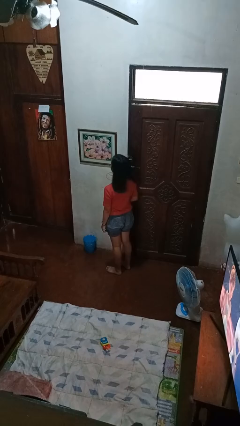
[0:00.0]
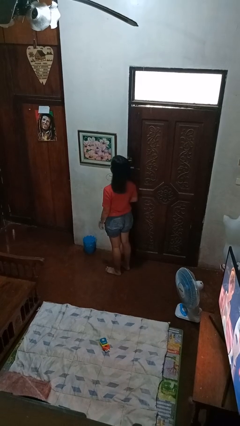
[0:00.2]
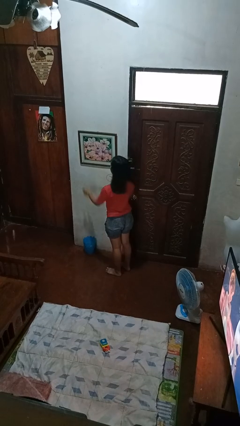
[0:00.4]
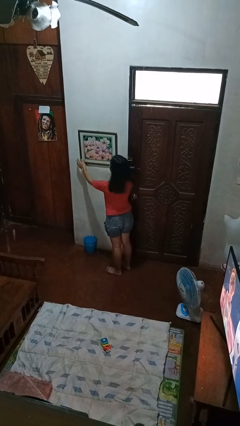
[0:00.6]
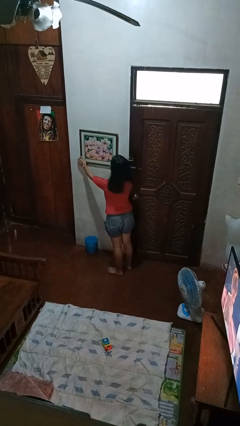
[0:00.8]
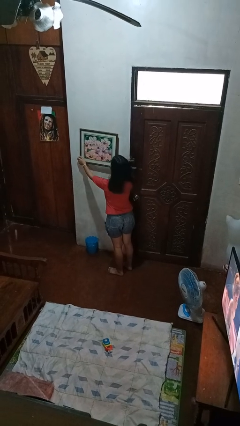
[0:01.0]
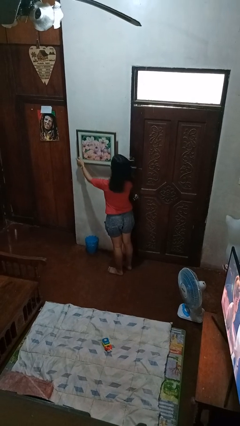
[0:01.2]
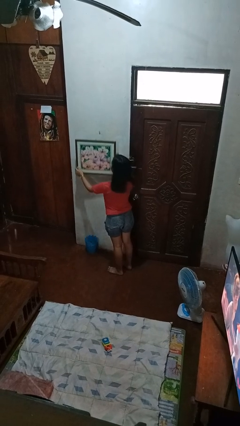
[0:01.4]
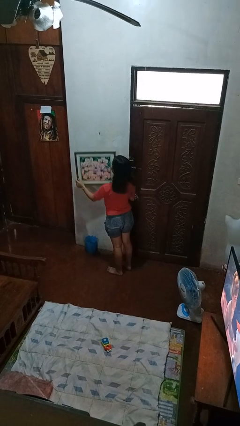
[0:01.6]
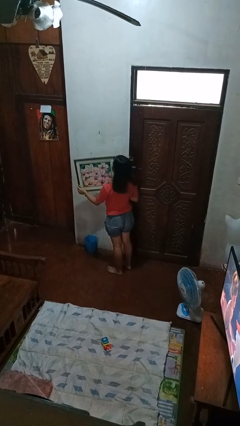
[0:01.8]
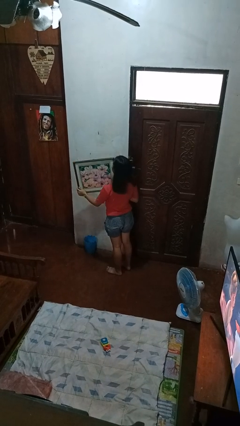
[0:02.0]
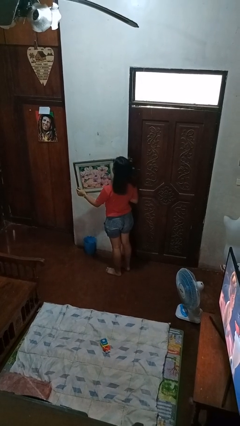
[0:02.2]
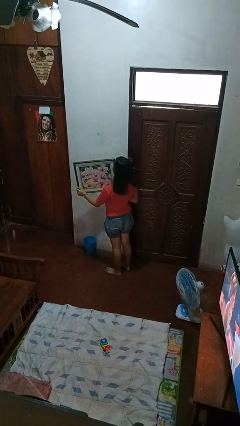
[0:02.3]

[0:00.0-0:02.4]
person takes down picture frame

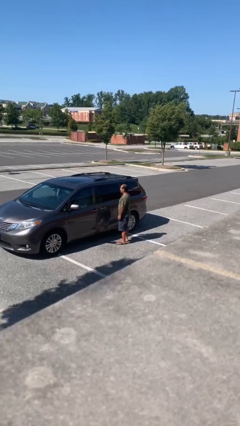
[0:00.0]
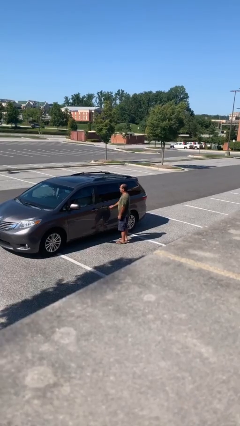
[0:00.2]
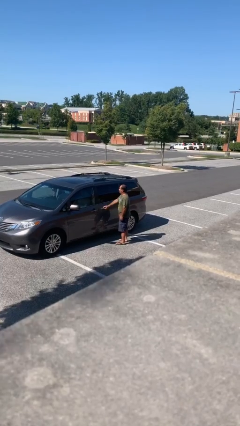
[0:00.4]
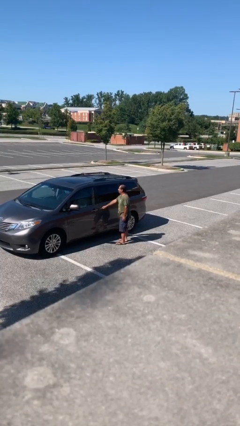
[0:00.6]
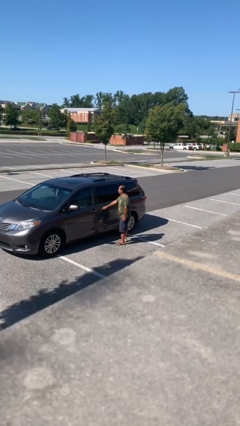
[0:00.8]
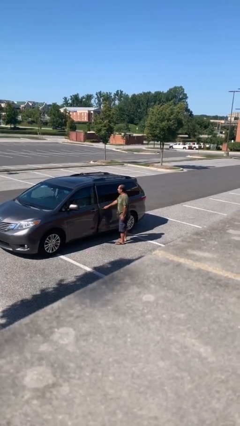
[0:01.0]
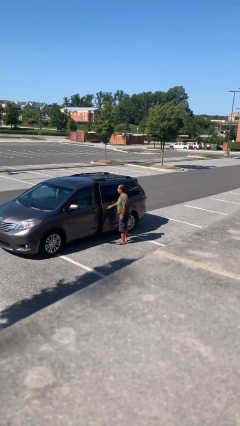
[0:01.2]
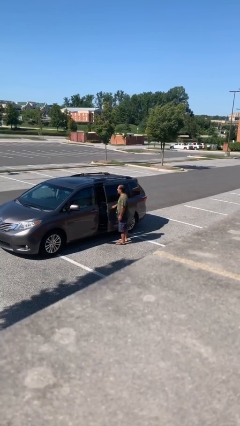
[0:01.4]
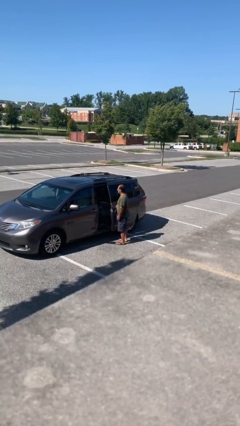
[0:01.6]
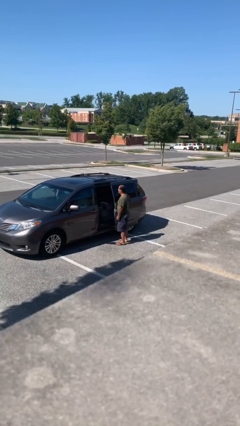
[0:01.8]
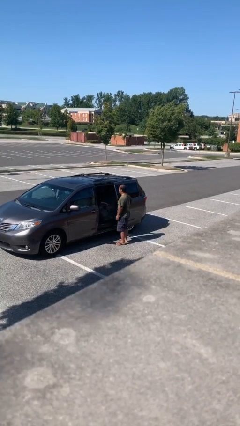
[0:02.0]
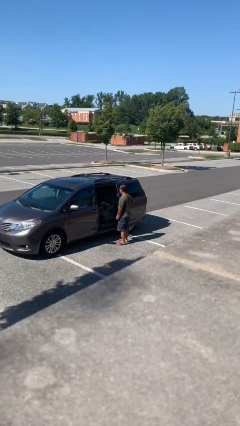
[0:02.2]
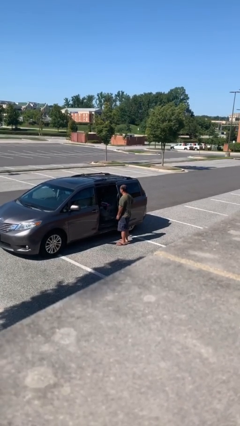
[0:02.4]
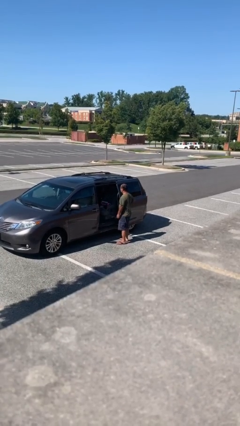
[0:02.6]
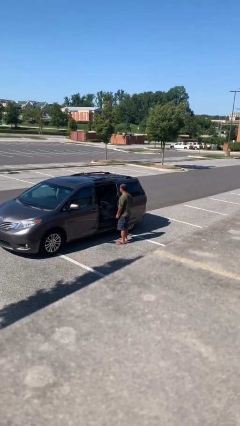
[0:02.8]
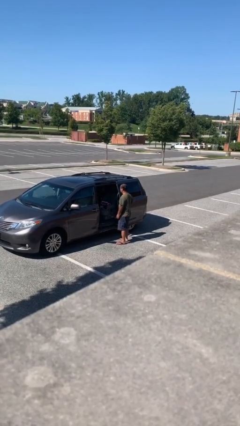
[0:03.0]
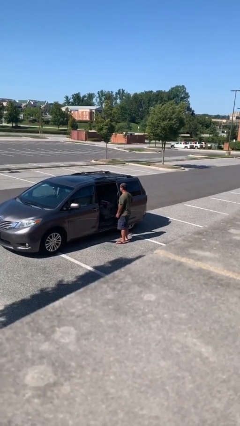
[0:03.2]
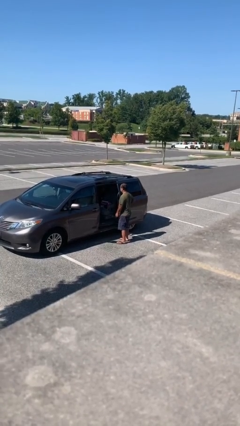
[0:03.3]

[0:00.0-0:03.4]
person opens car door

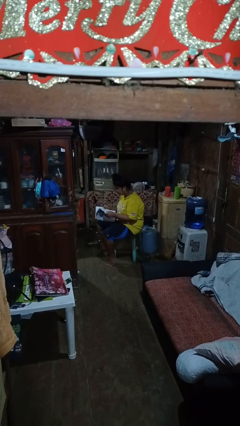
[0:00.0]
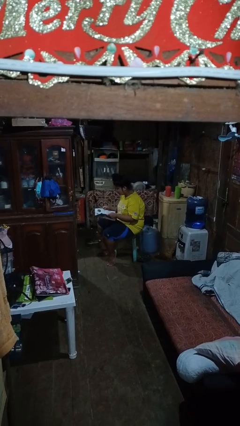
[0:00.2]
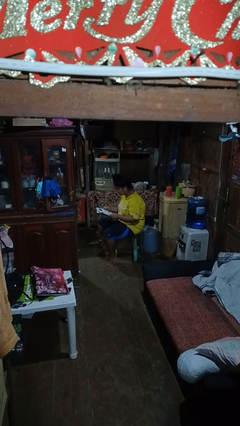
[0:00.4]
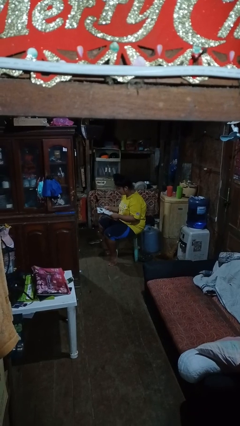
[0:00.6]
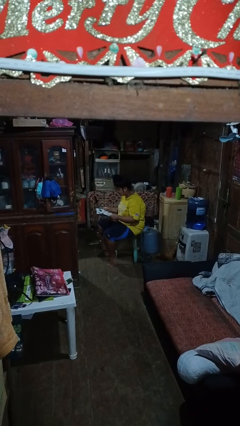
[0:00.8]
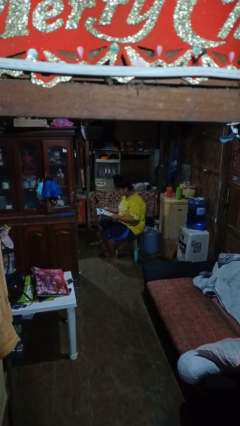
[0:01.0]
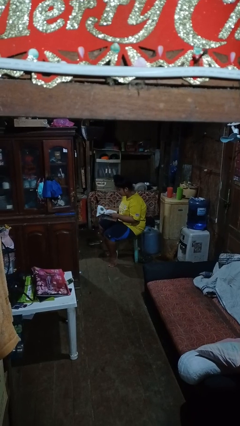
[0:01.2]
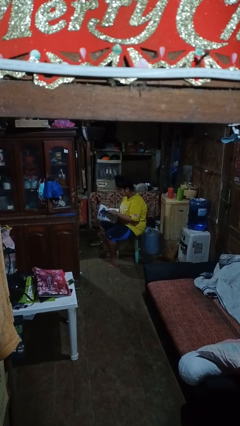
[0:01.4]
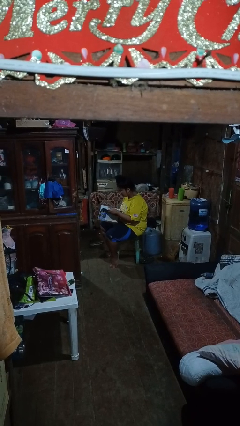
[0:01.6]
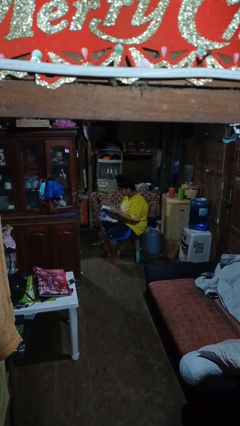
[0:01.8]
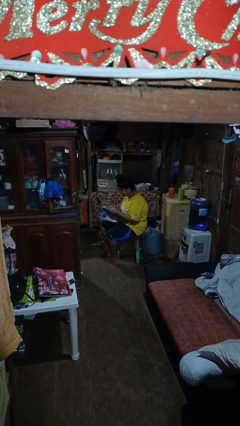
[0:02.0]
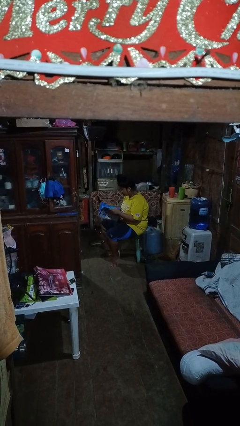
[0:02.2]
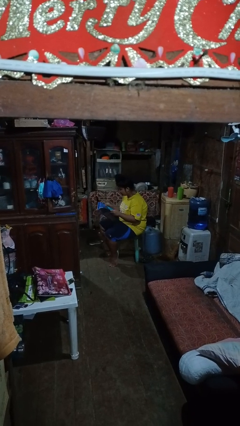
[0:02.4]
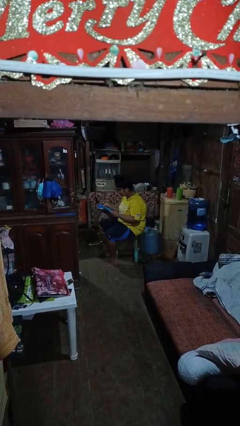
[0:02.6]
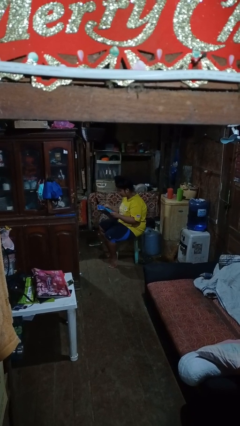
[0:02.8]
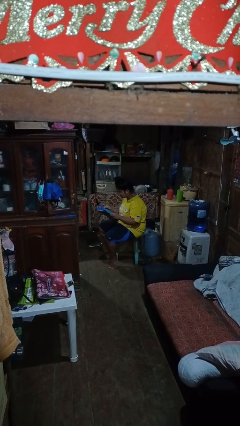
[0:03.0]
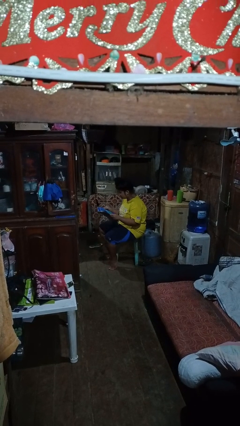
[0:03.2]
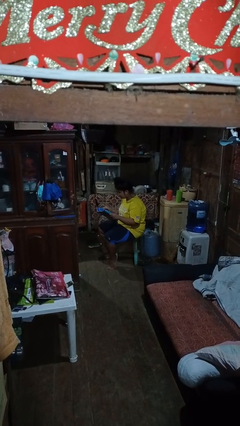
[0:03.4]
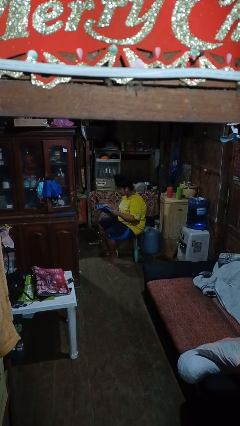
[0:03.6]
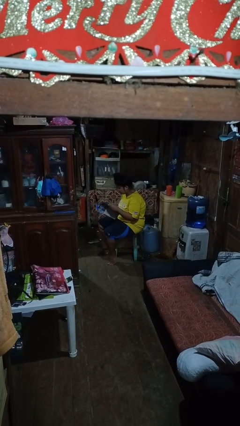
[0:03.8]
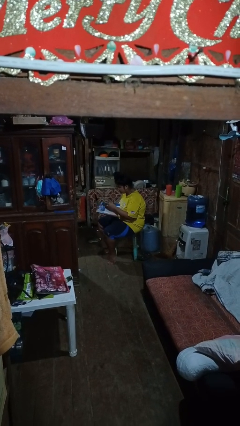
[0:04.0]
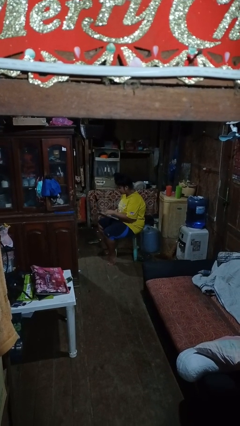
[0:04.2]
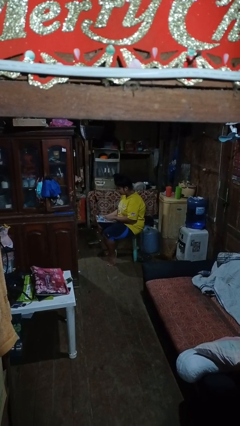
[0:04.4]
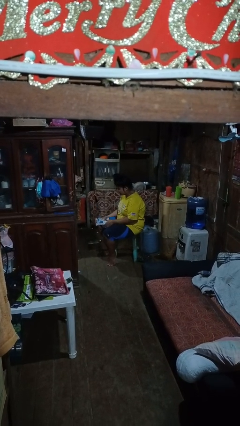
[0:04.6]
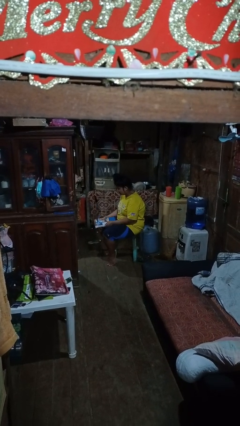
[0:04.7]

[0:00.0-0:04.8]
person reads magazine

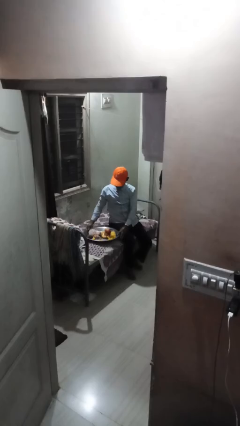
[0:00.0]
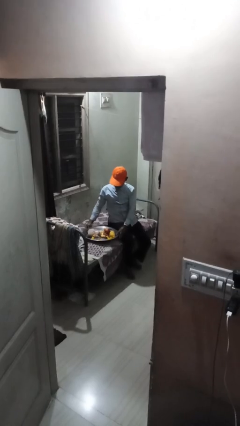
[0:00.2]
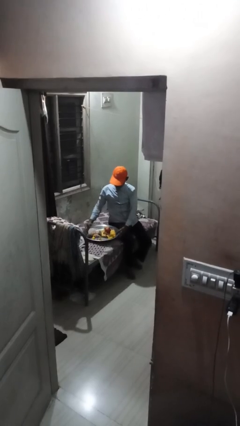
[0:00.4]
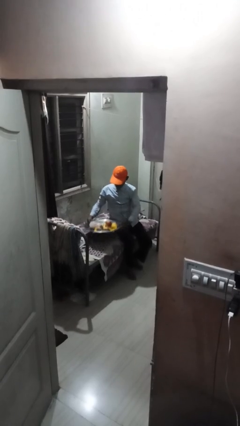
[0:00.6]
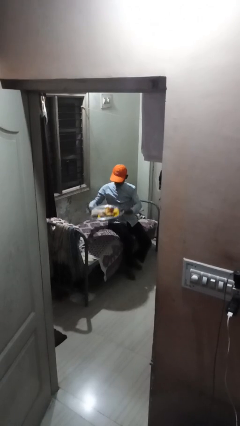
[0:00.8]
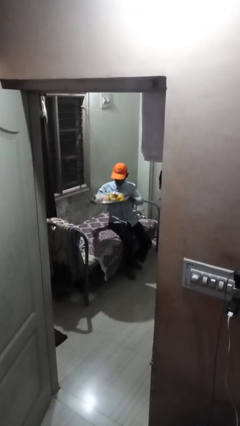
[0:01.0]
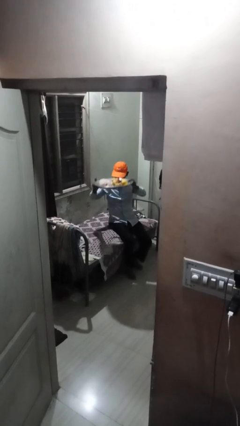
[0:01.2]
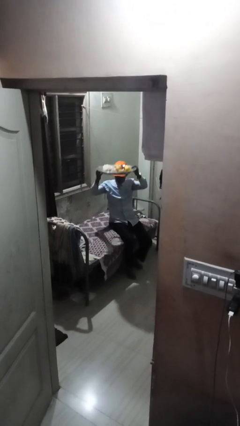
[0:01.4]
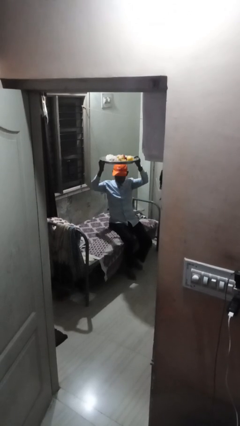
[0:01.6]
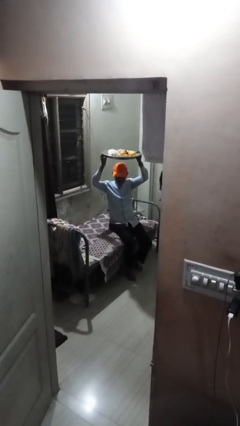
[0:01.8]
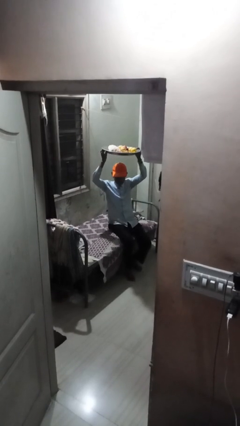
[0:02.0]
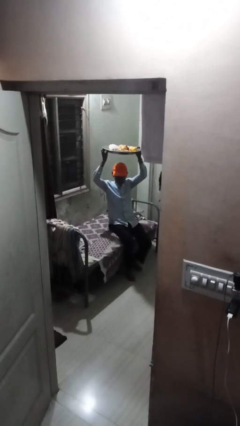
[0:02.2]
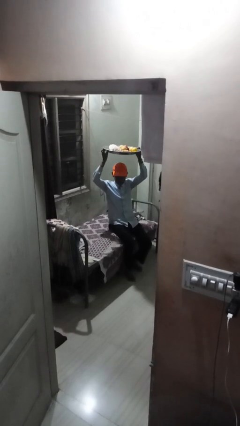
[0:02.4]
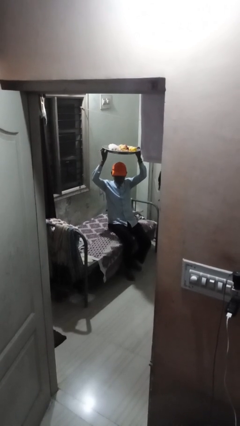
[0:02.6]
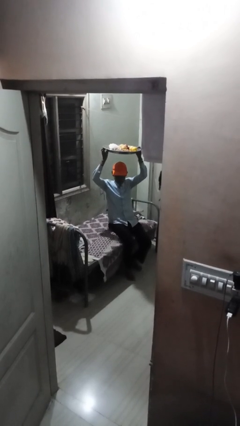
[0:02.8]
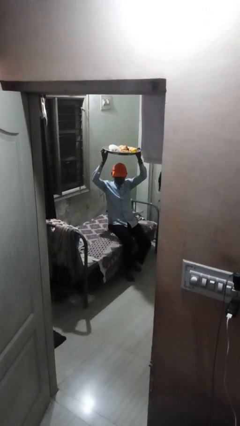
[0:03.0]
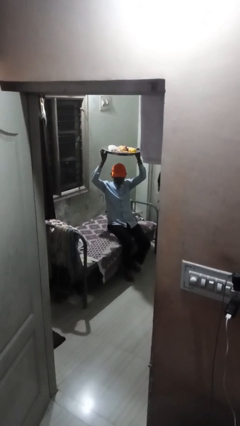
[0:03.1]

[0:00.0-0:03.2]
person holds object above head

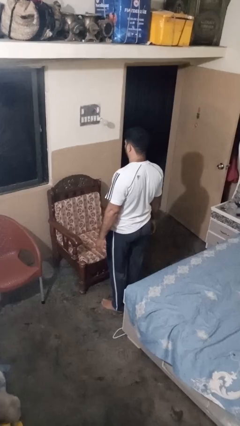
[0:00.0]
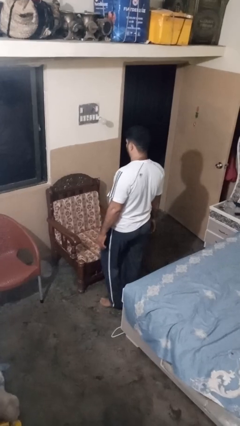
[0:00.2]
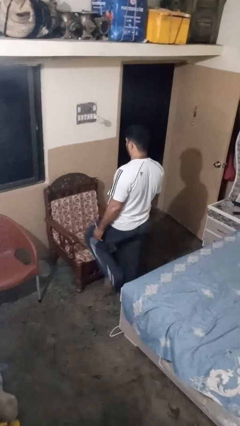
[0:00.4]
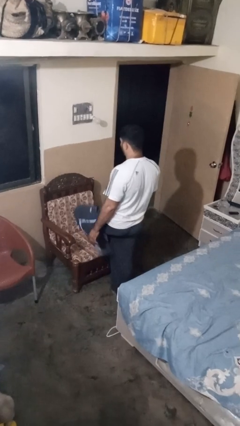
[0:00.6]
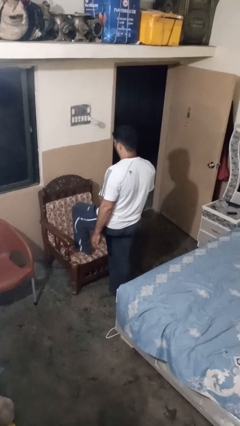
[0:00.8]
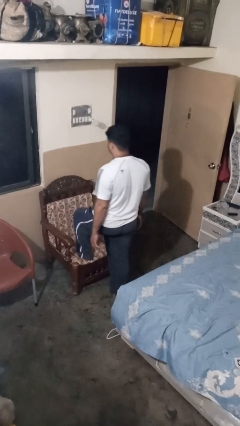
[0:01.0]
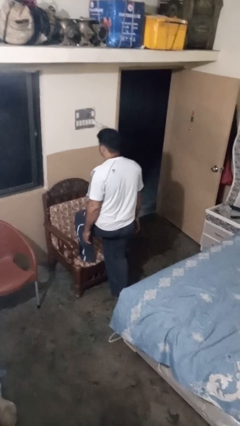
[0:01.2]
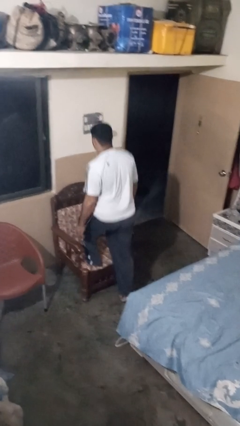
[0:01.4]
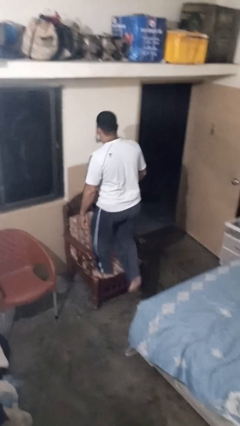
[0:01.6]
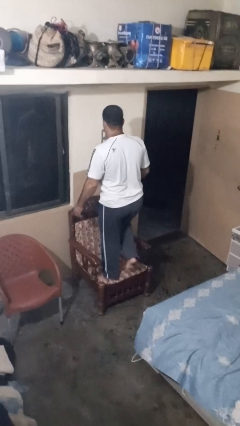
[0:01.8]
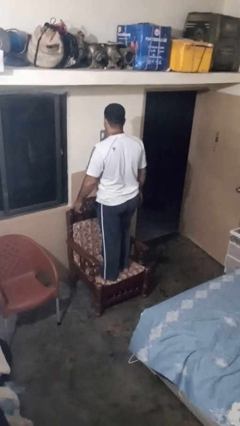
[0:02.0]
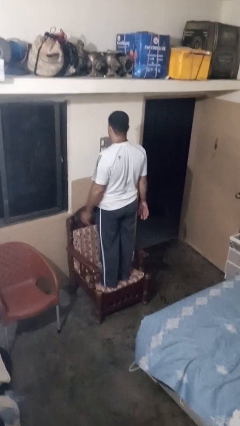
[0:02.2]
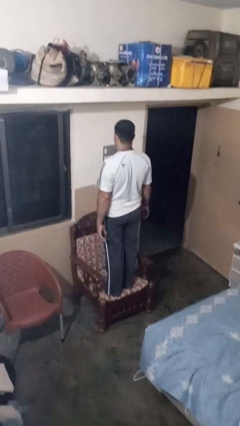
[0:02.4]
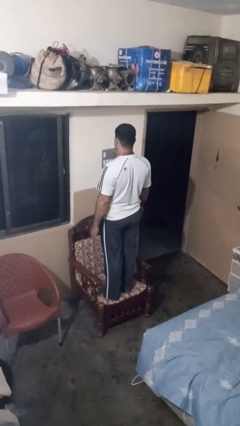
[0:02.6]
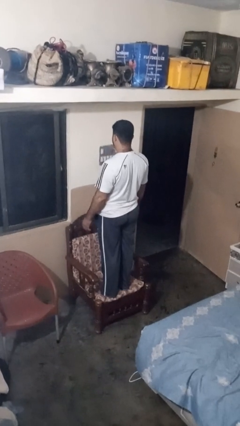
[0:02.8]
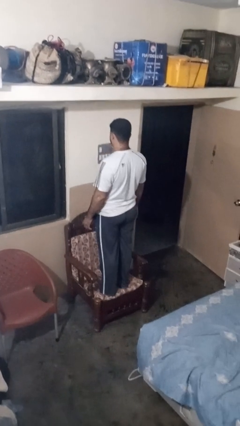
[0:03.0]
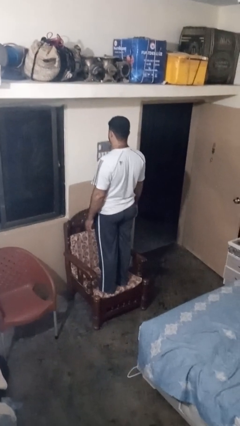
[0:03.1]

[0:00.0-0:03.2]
person climbs on couch

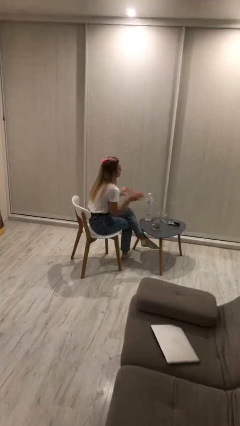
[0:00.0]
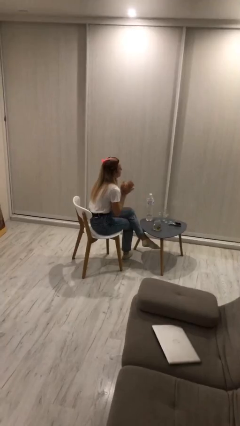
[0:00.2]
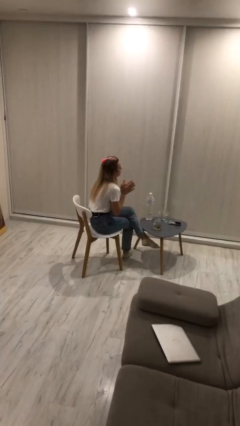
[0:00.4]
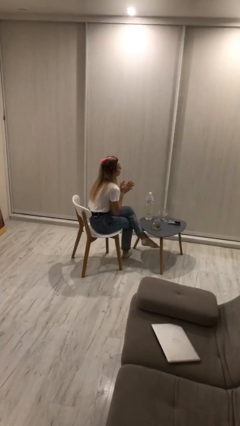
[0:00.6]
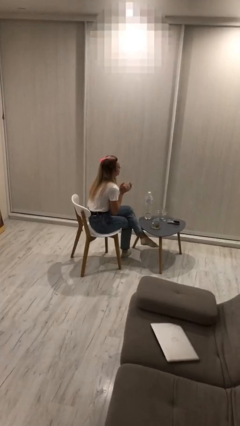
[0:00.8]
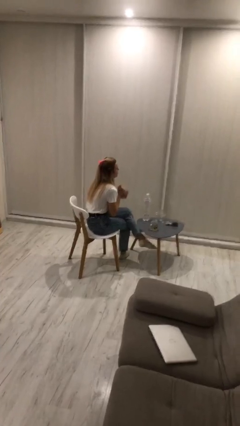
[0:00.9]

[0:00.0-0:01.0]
person claps hands
